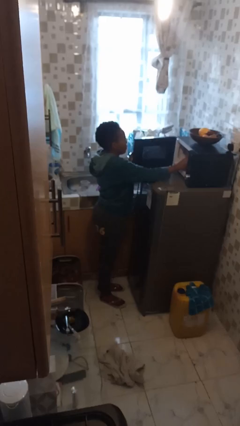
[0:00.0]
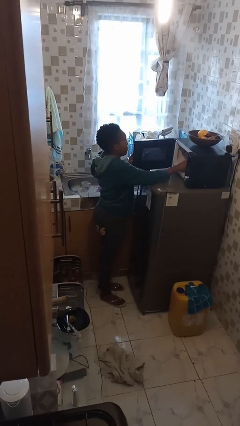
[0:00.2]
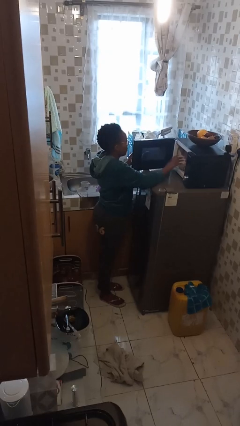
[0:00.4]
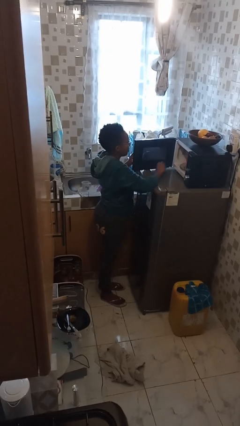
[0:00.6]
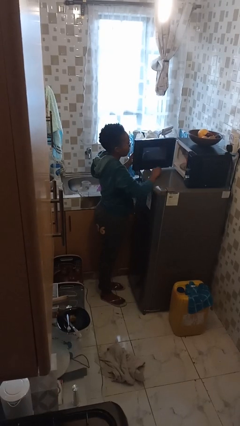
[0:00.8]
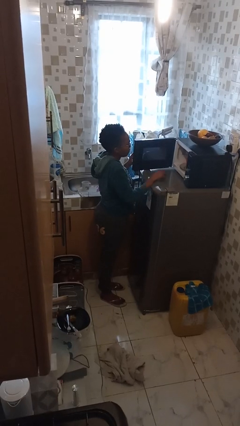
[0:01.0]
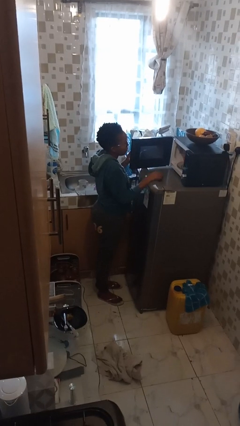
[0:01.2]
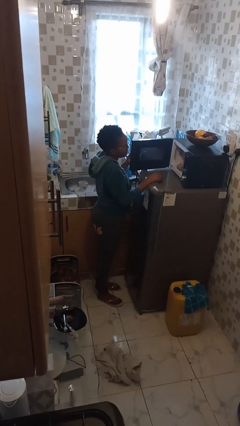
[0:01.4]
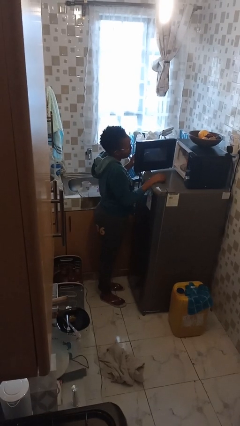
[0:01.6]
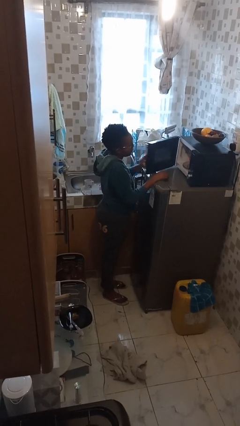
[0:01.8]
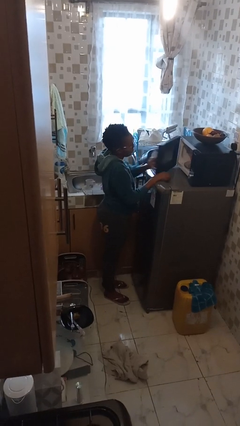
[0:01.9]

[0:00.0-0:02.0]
person puts object into microwave

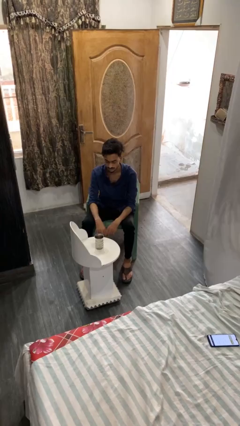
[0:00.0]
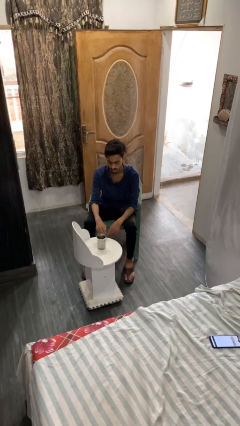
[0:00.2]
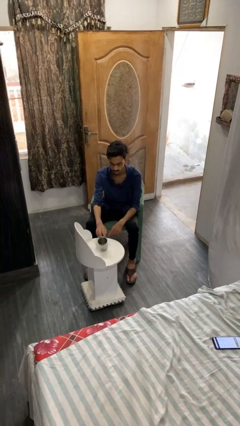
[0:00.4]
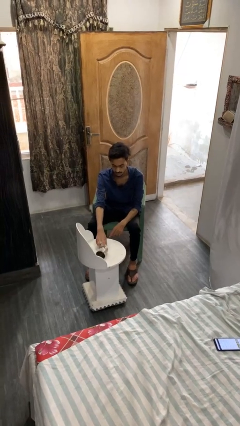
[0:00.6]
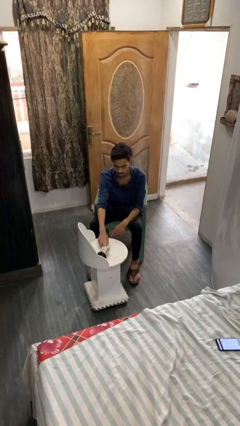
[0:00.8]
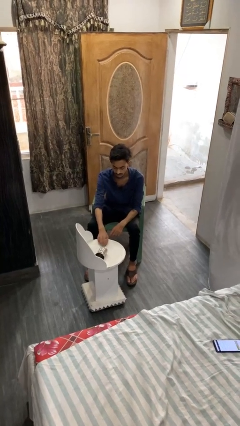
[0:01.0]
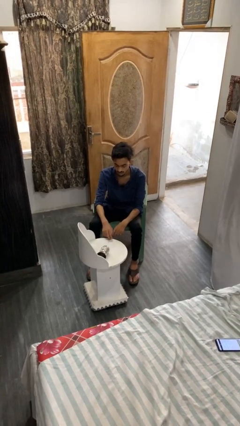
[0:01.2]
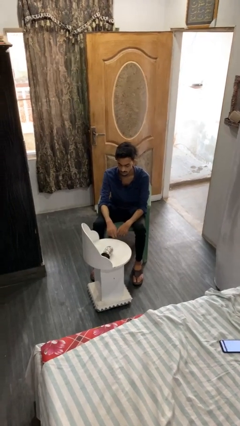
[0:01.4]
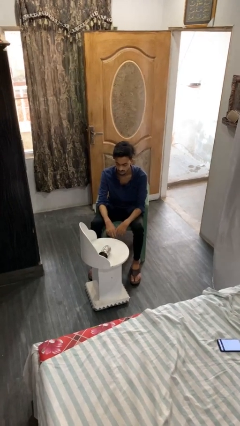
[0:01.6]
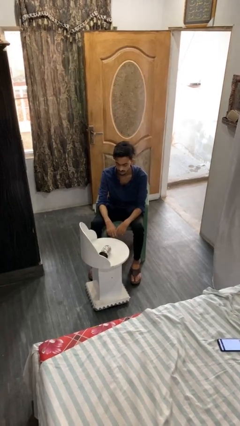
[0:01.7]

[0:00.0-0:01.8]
person knocks over glass

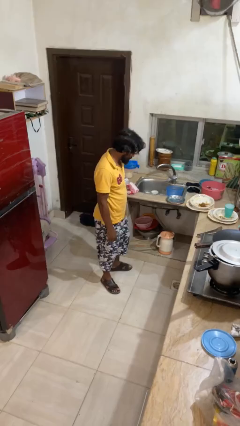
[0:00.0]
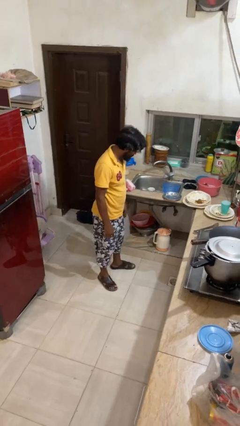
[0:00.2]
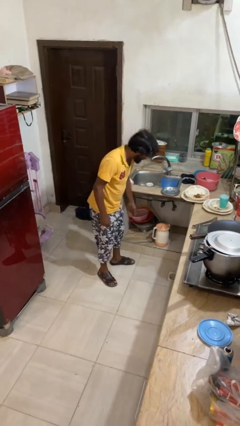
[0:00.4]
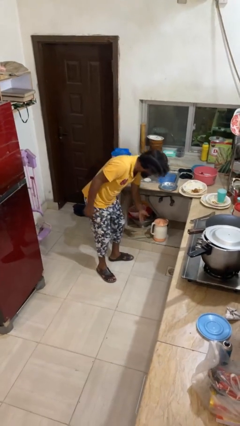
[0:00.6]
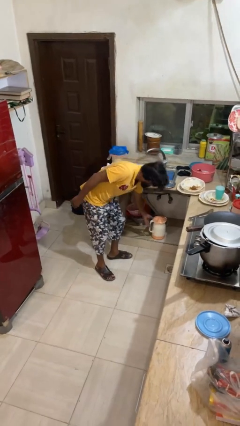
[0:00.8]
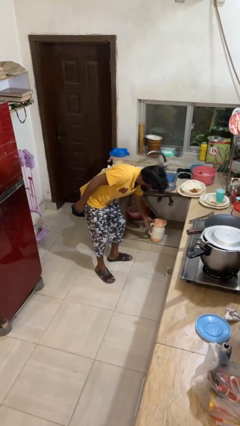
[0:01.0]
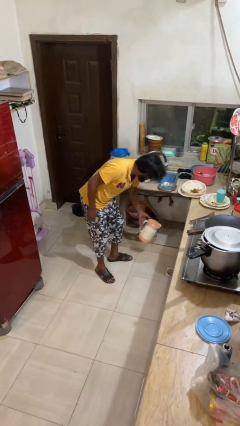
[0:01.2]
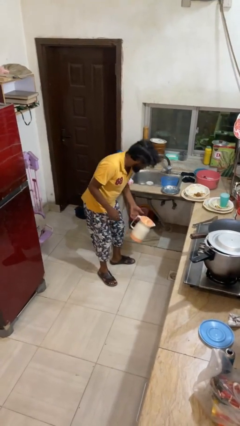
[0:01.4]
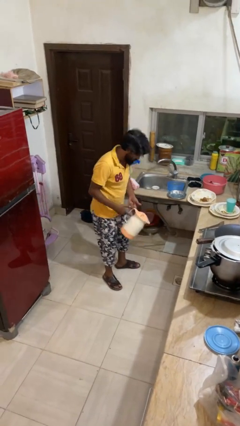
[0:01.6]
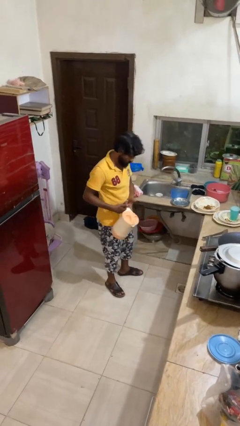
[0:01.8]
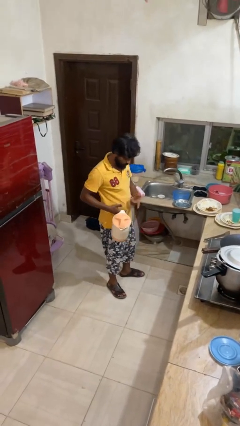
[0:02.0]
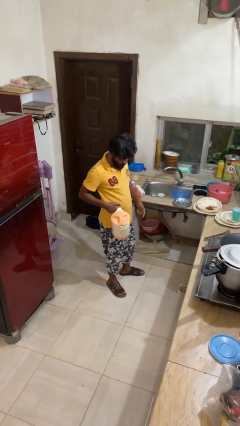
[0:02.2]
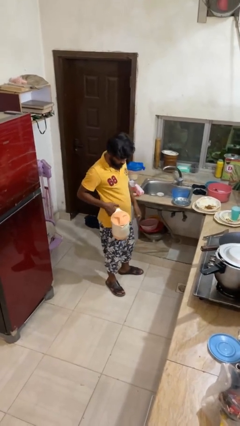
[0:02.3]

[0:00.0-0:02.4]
person picks up object from cabinet

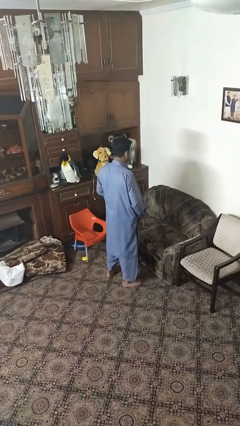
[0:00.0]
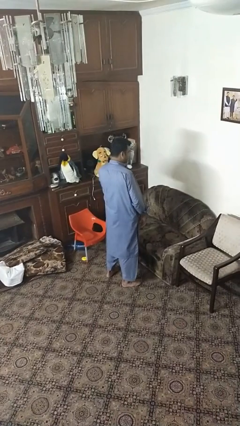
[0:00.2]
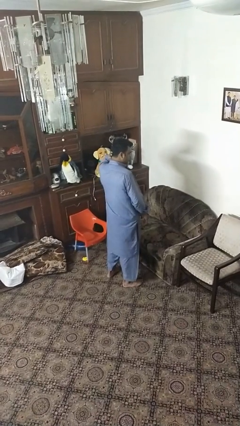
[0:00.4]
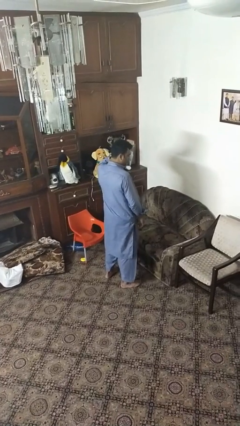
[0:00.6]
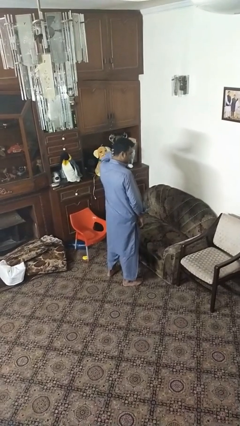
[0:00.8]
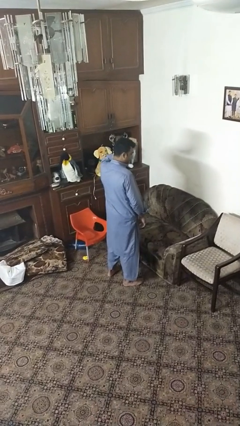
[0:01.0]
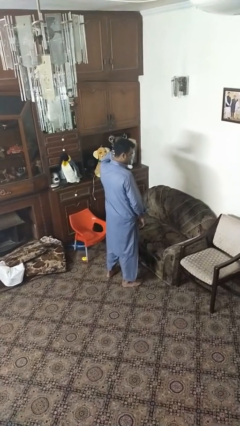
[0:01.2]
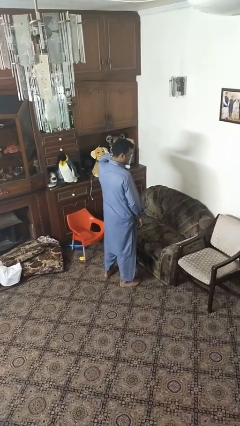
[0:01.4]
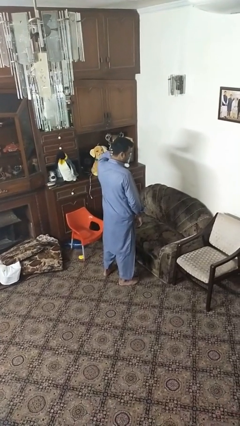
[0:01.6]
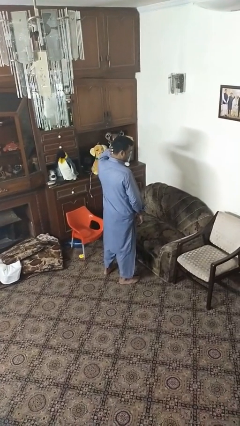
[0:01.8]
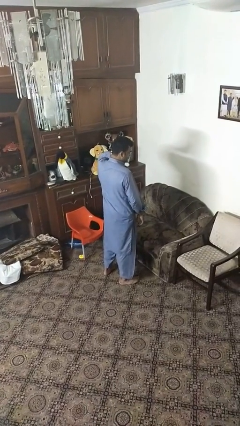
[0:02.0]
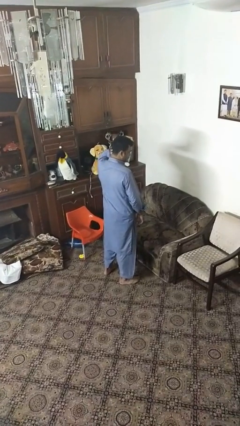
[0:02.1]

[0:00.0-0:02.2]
person strokes hair

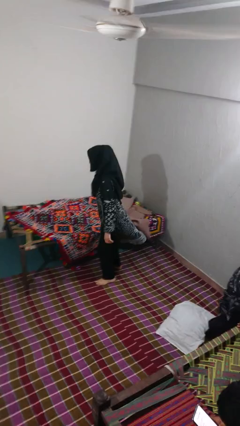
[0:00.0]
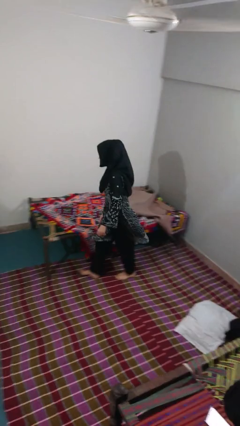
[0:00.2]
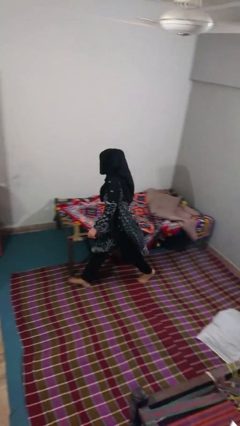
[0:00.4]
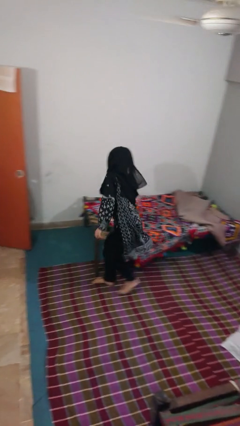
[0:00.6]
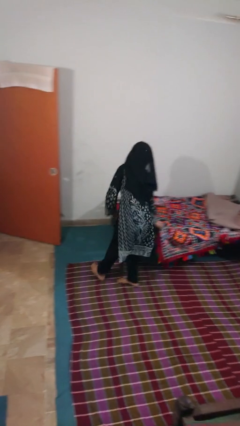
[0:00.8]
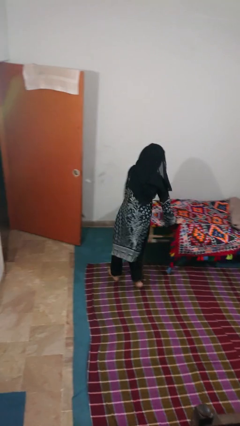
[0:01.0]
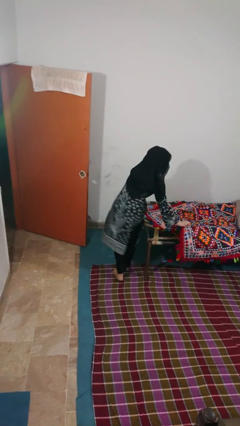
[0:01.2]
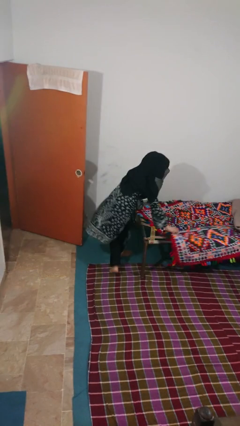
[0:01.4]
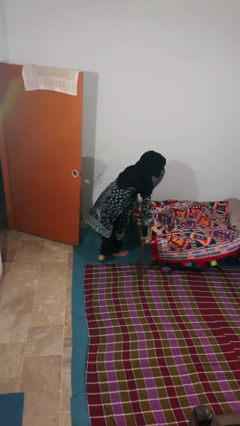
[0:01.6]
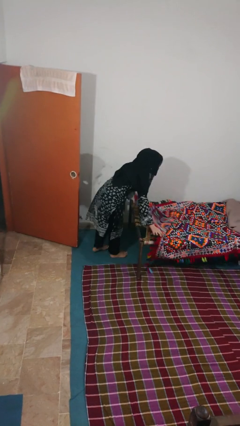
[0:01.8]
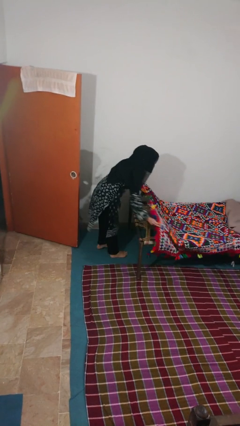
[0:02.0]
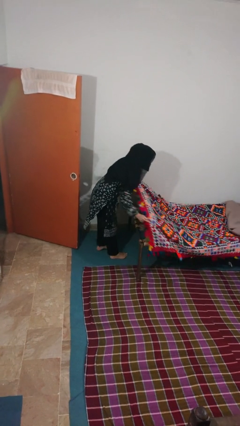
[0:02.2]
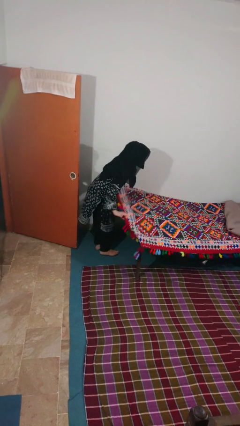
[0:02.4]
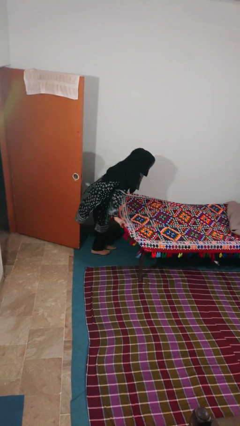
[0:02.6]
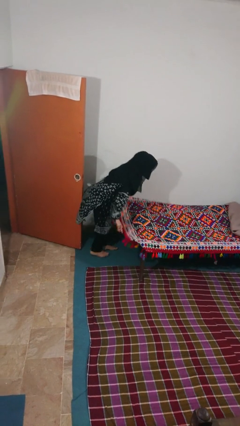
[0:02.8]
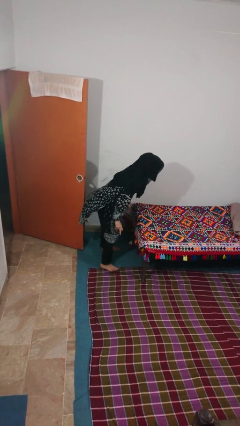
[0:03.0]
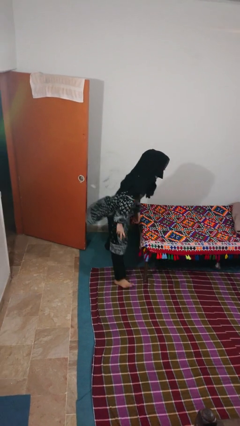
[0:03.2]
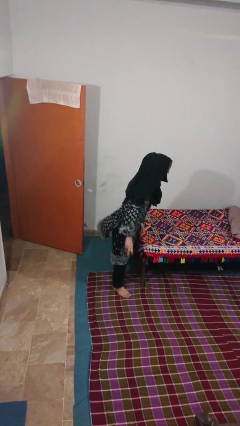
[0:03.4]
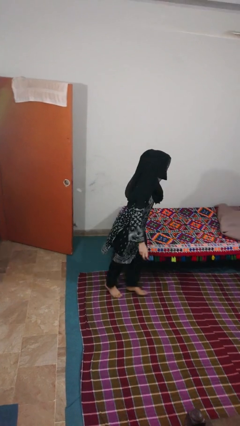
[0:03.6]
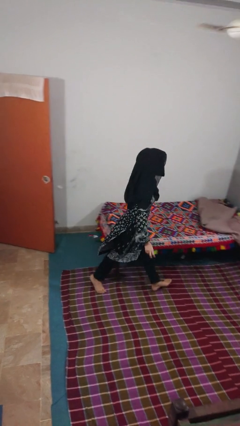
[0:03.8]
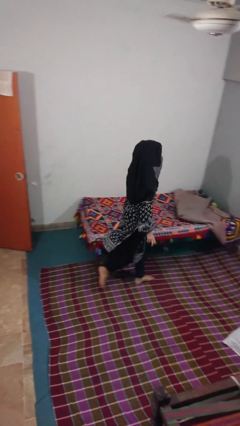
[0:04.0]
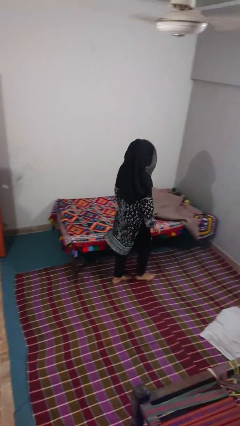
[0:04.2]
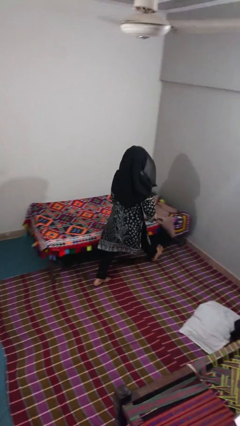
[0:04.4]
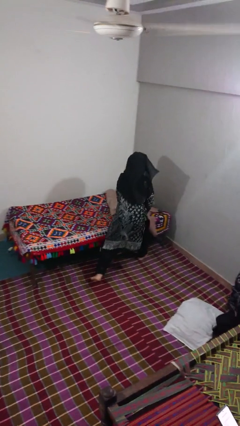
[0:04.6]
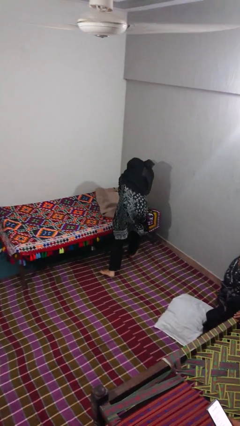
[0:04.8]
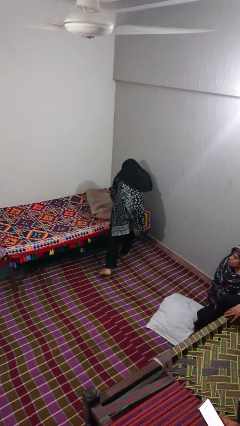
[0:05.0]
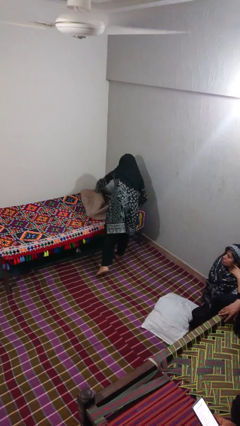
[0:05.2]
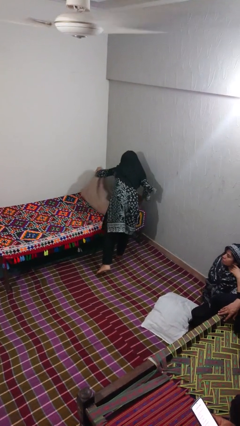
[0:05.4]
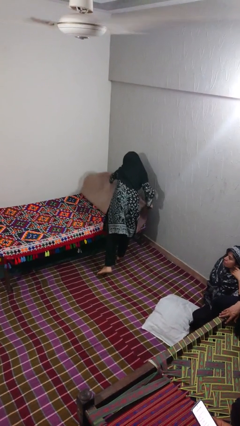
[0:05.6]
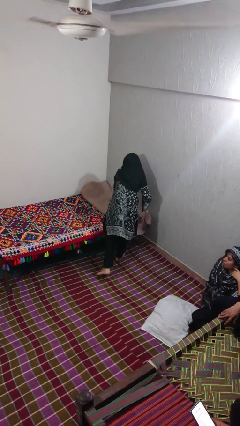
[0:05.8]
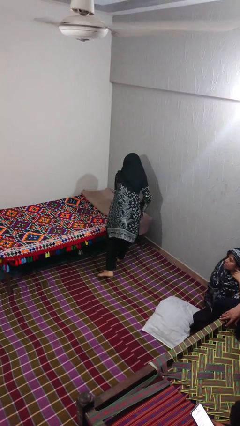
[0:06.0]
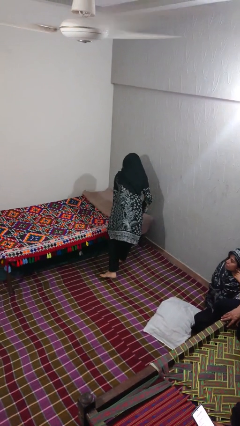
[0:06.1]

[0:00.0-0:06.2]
person makes bed

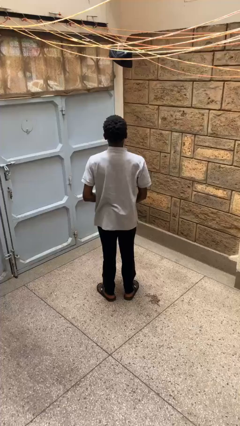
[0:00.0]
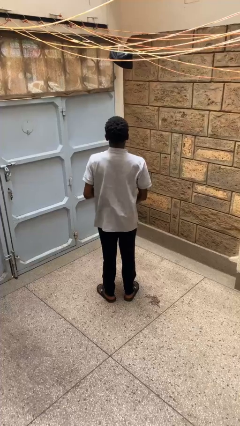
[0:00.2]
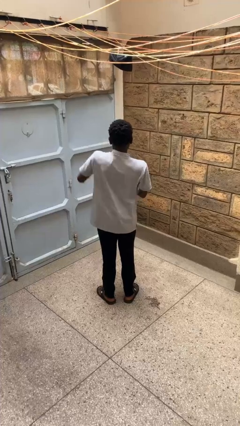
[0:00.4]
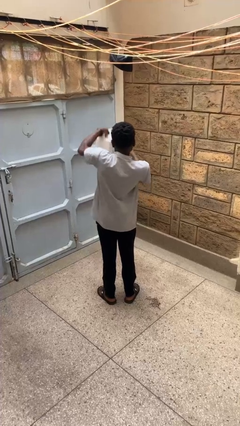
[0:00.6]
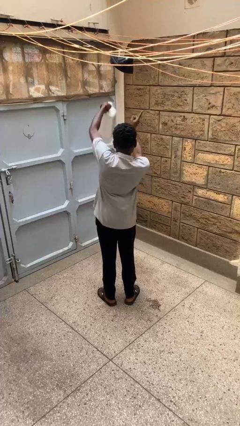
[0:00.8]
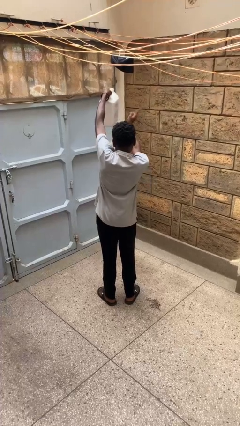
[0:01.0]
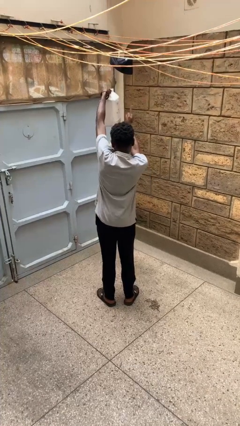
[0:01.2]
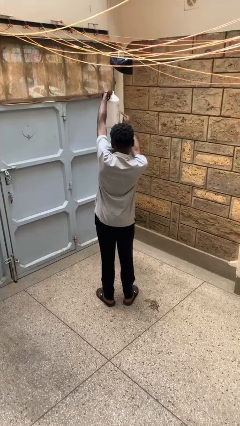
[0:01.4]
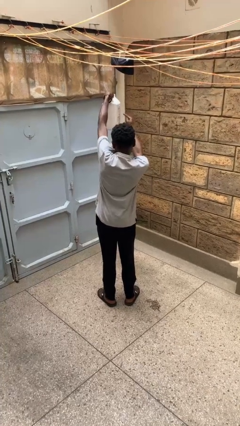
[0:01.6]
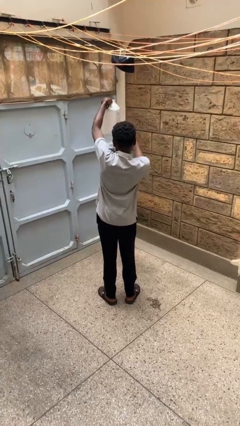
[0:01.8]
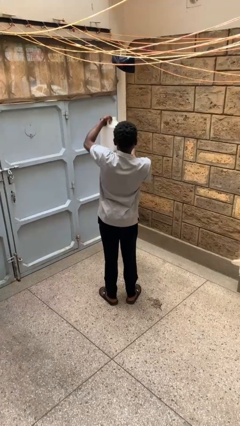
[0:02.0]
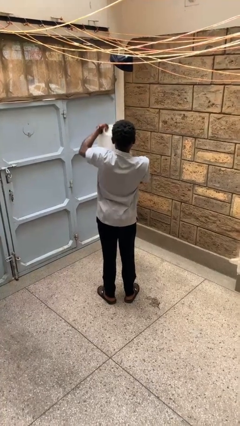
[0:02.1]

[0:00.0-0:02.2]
person taps object with finger

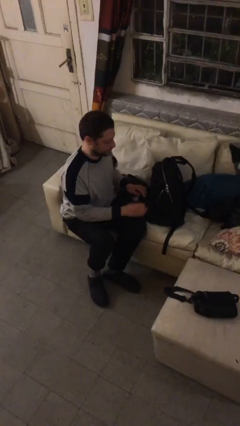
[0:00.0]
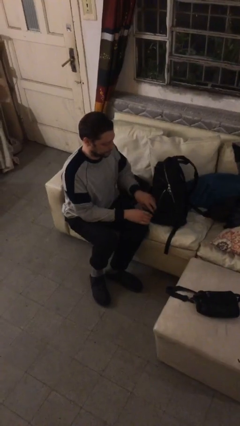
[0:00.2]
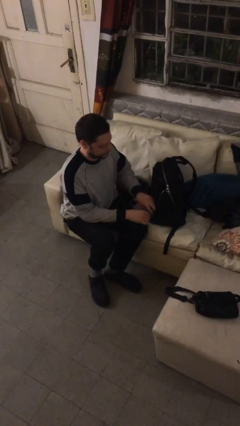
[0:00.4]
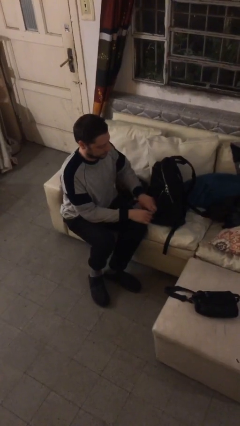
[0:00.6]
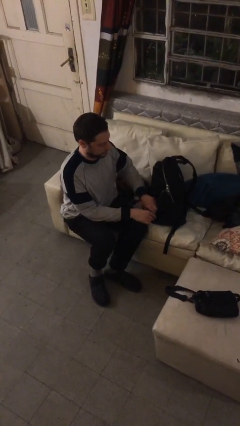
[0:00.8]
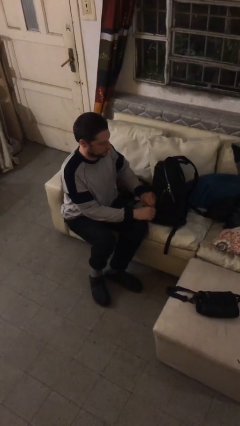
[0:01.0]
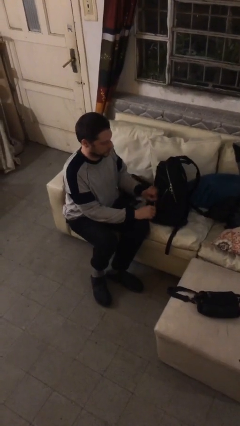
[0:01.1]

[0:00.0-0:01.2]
person puts object into backpack
